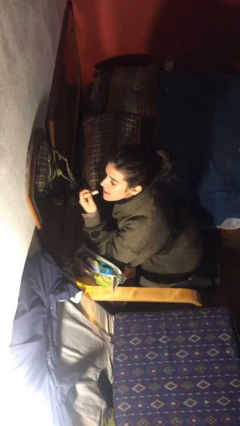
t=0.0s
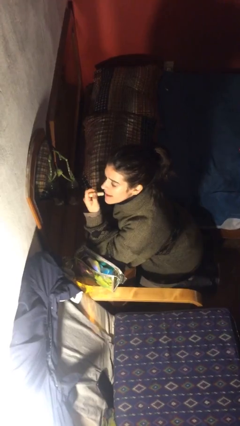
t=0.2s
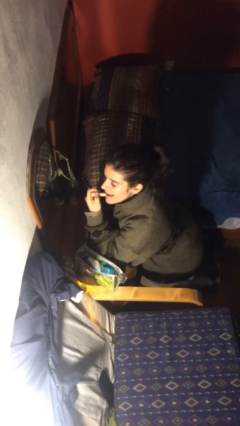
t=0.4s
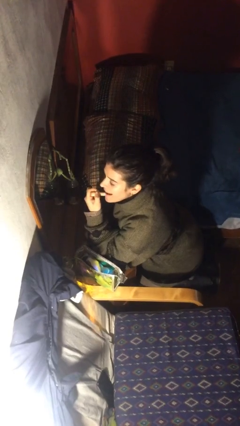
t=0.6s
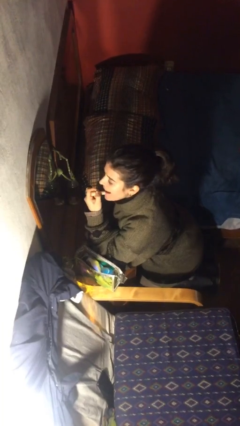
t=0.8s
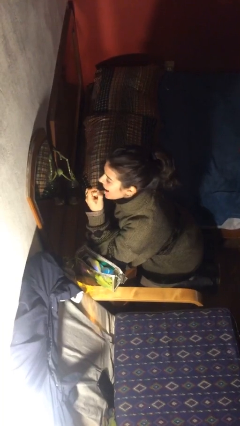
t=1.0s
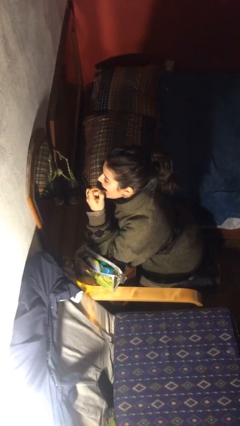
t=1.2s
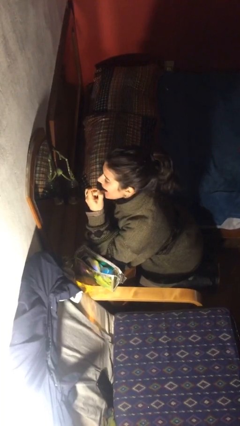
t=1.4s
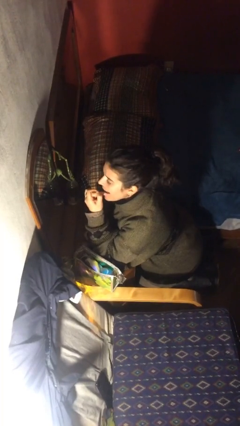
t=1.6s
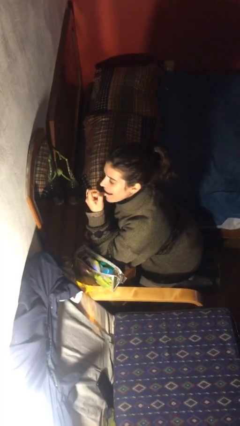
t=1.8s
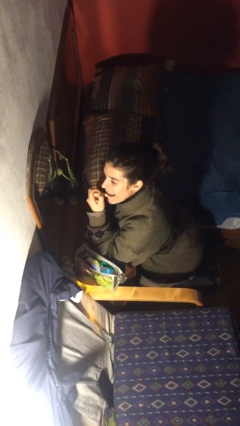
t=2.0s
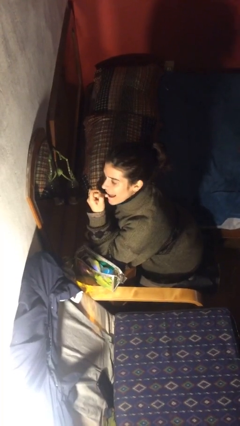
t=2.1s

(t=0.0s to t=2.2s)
person applies lip makeup

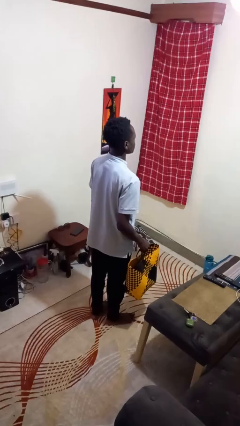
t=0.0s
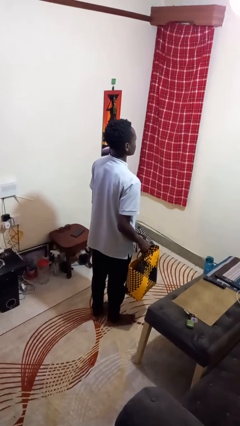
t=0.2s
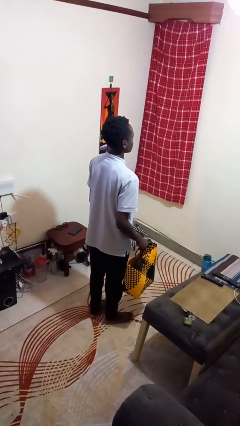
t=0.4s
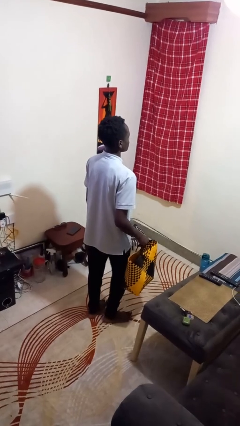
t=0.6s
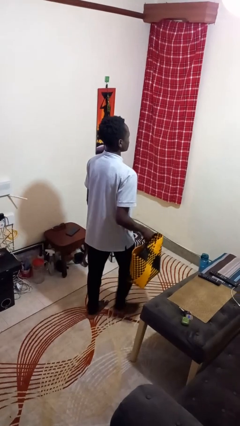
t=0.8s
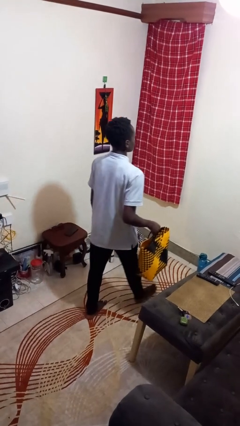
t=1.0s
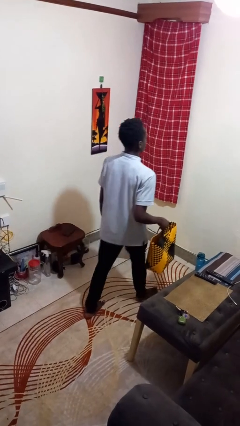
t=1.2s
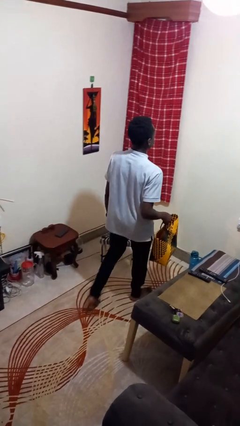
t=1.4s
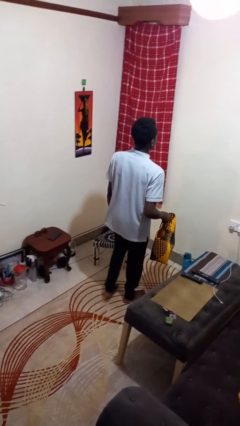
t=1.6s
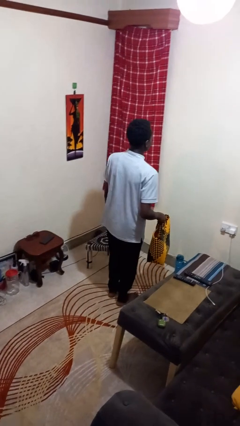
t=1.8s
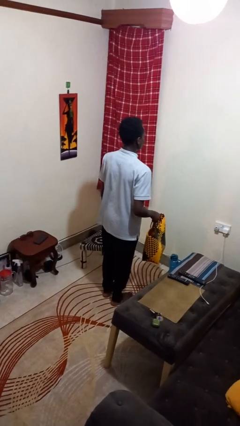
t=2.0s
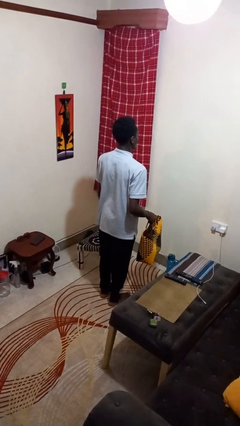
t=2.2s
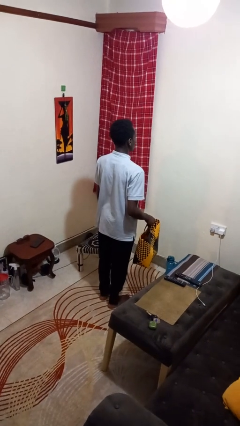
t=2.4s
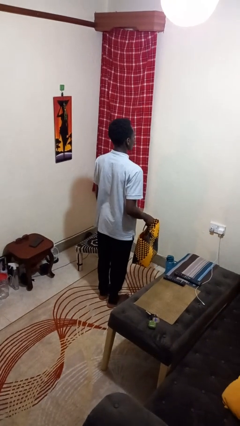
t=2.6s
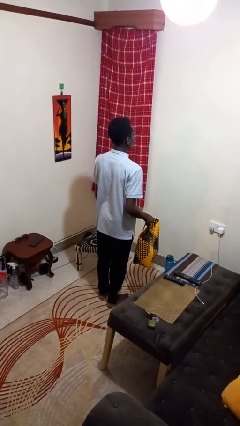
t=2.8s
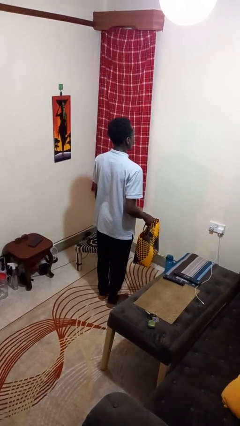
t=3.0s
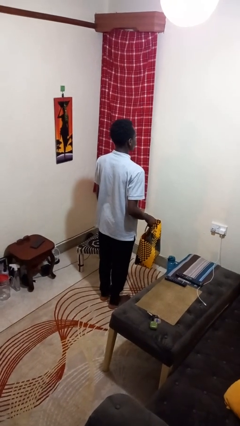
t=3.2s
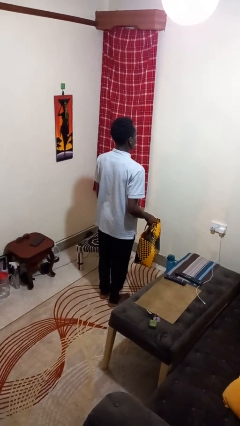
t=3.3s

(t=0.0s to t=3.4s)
person carries groceries

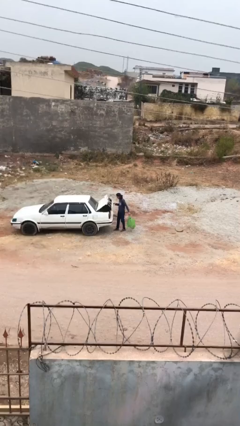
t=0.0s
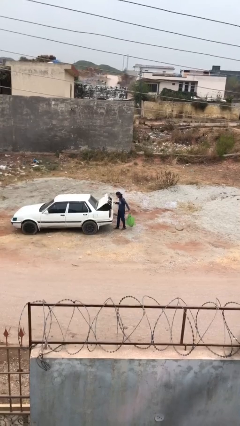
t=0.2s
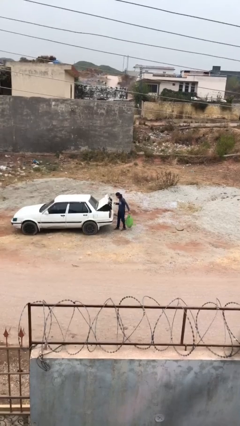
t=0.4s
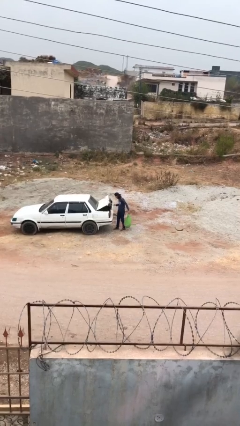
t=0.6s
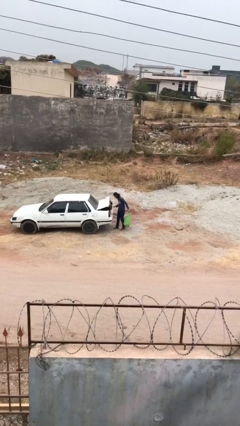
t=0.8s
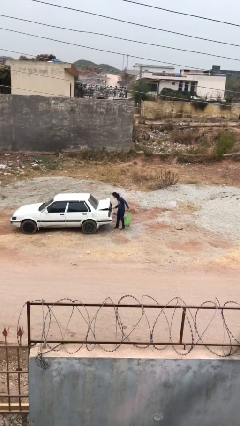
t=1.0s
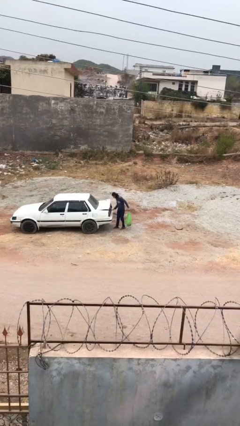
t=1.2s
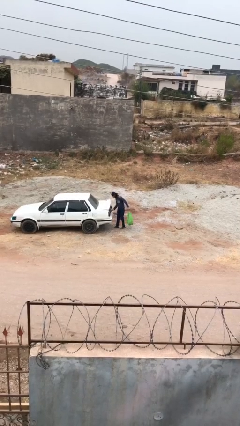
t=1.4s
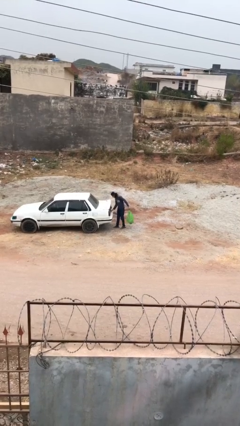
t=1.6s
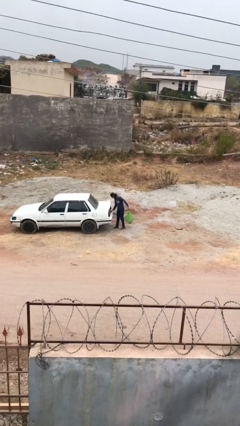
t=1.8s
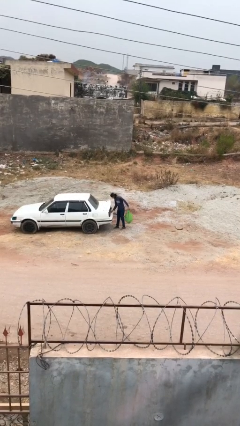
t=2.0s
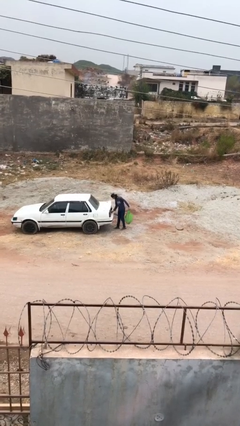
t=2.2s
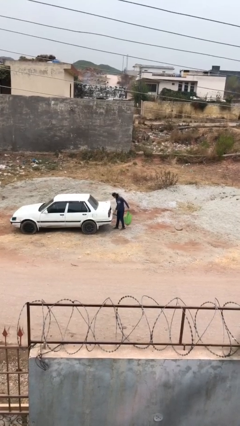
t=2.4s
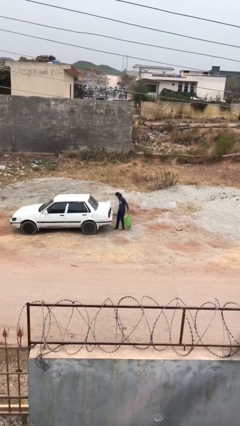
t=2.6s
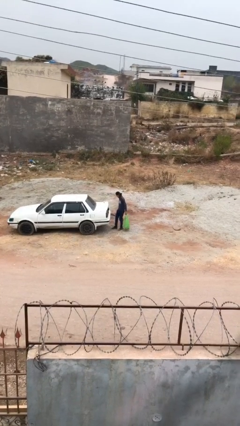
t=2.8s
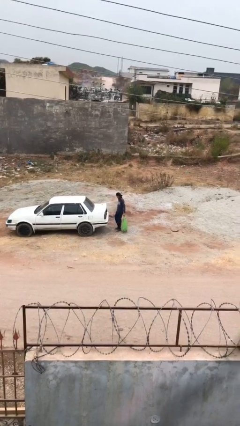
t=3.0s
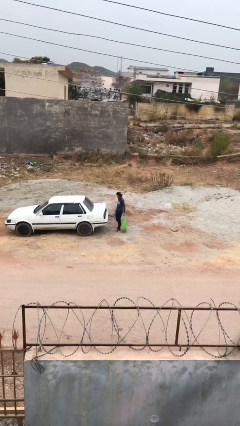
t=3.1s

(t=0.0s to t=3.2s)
person closes car trunk

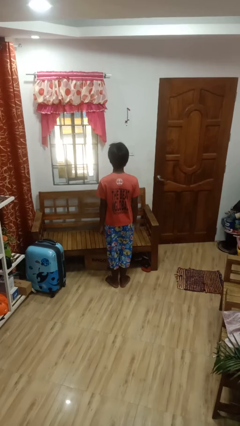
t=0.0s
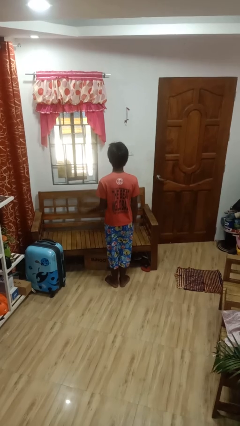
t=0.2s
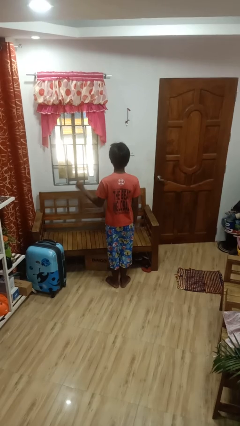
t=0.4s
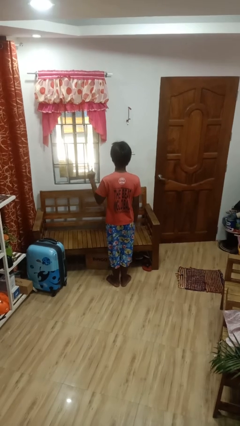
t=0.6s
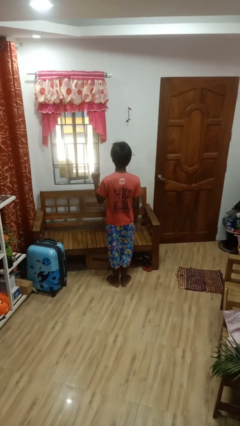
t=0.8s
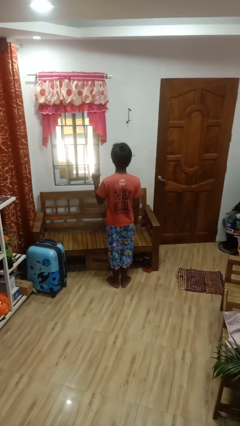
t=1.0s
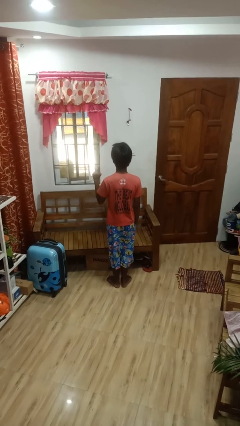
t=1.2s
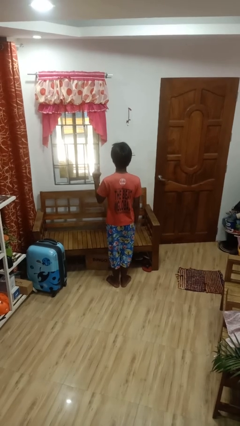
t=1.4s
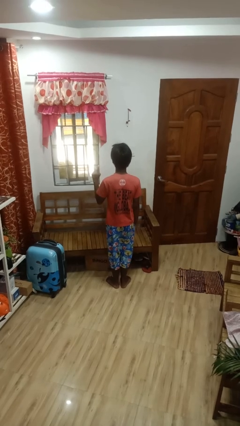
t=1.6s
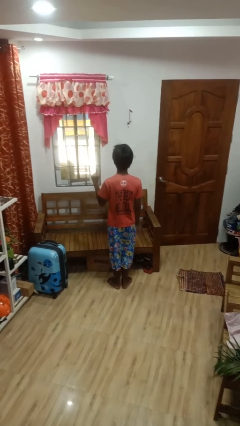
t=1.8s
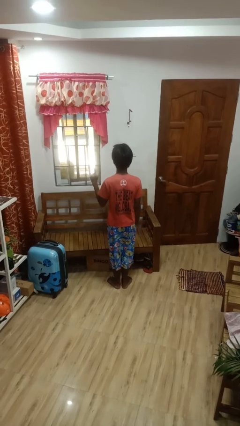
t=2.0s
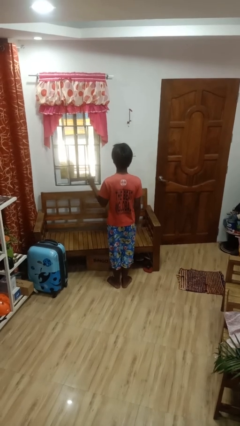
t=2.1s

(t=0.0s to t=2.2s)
person gestures number one

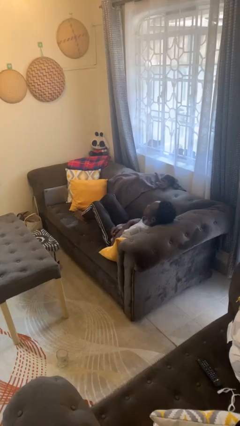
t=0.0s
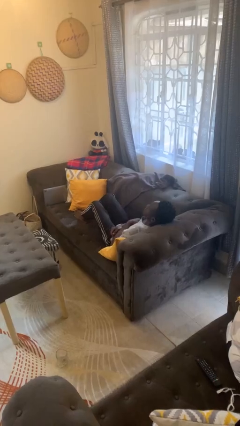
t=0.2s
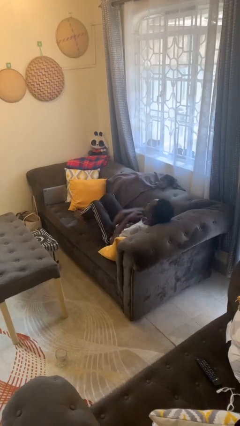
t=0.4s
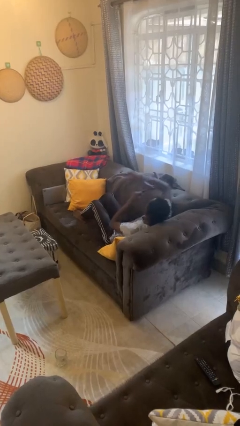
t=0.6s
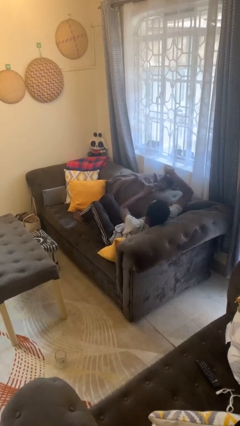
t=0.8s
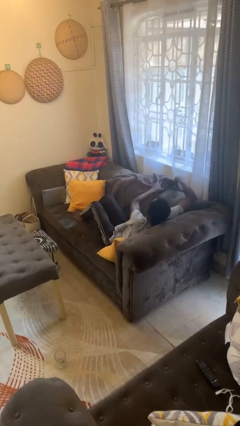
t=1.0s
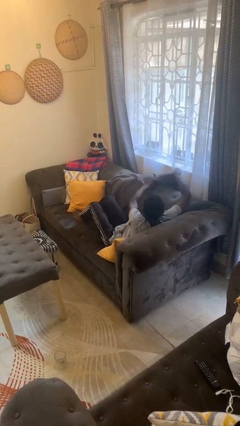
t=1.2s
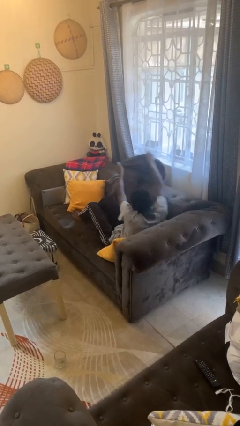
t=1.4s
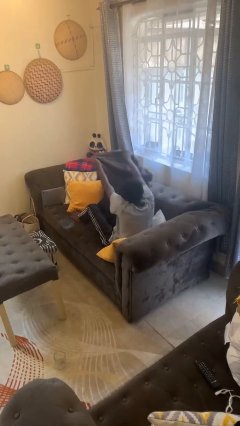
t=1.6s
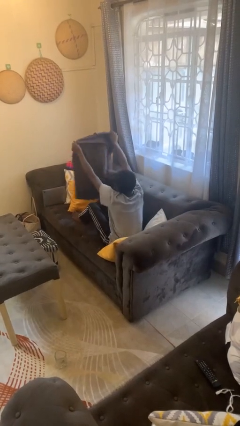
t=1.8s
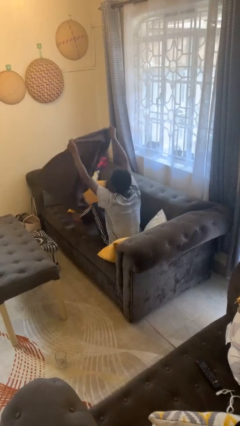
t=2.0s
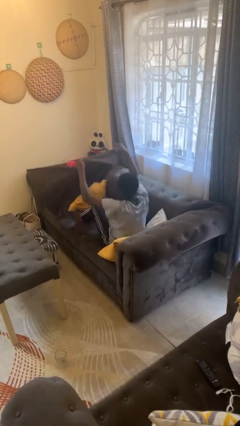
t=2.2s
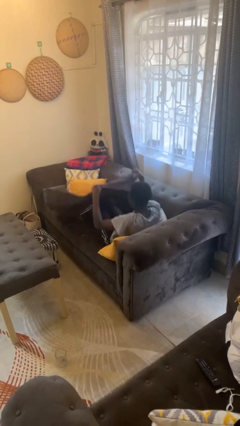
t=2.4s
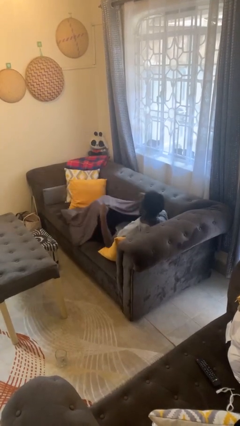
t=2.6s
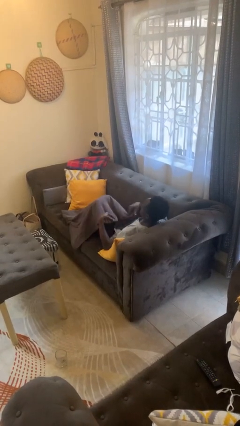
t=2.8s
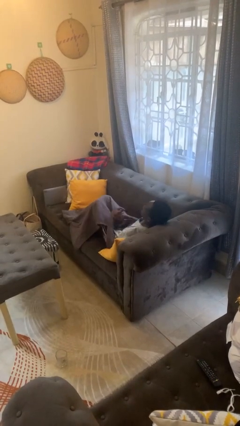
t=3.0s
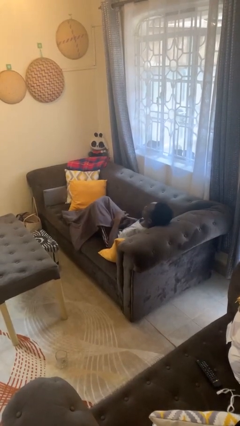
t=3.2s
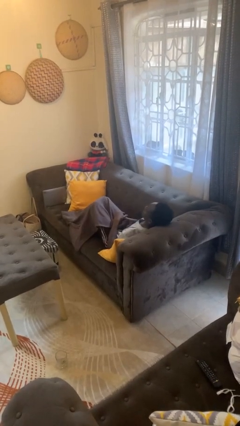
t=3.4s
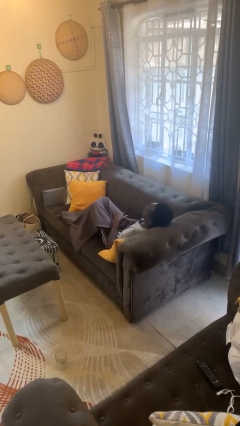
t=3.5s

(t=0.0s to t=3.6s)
person covers with blanket

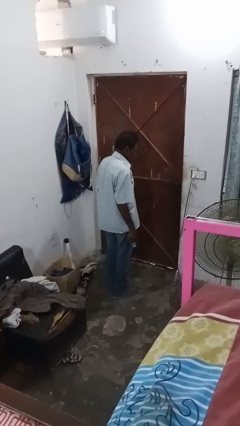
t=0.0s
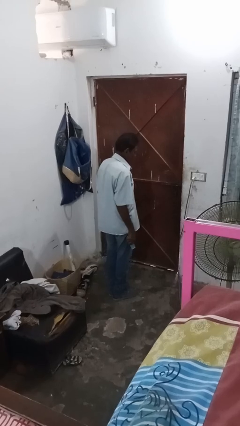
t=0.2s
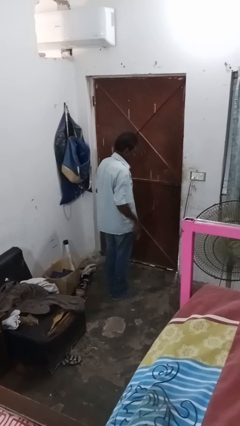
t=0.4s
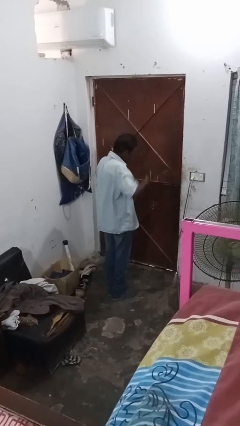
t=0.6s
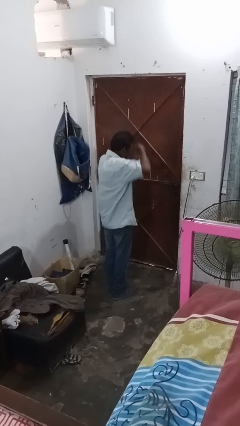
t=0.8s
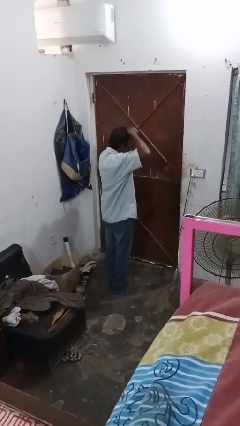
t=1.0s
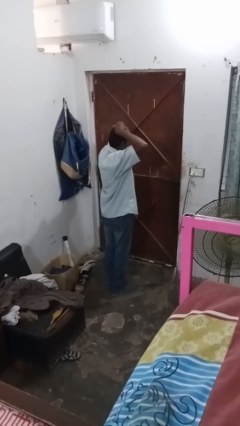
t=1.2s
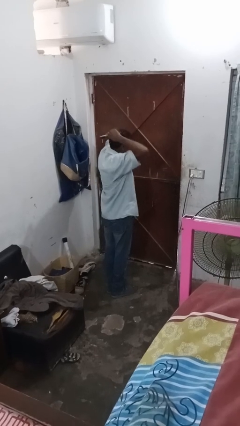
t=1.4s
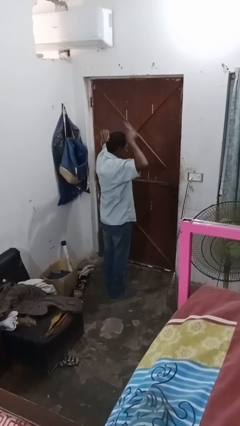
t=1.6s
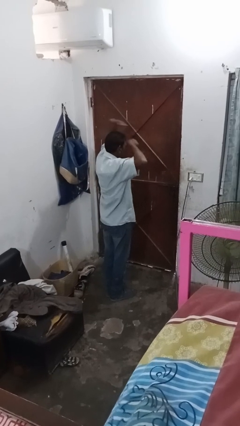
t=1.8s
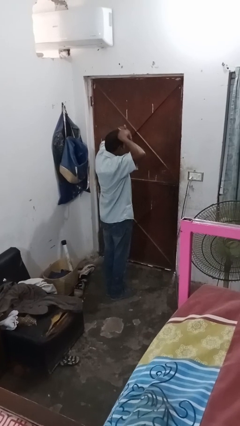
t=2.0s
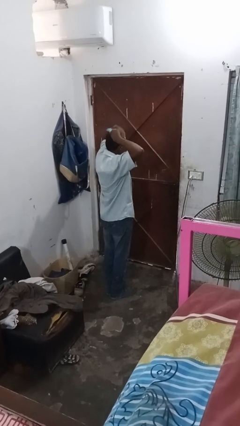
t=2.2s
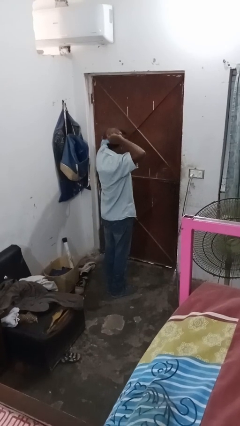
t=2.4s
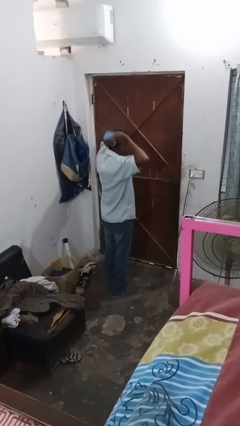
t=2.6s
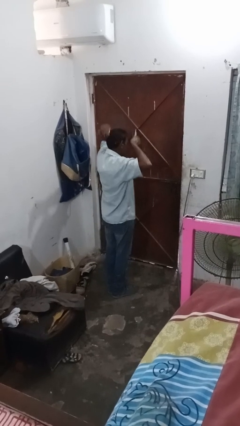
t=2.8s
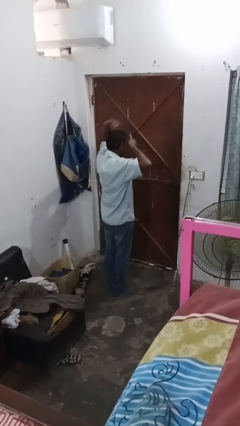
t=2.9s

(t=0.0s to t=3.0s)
person brushes hair
